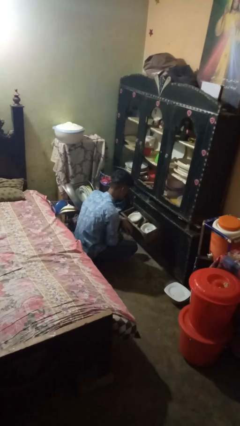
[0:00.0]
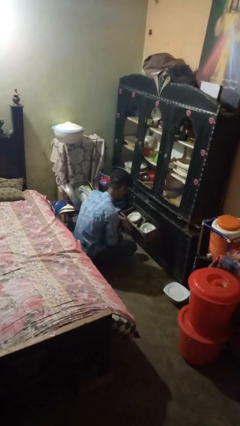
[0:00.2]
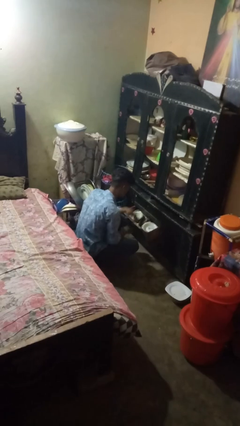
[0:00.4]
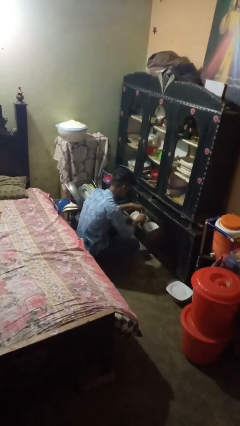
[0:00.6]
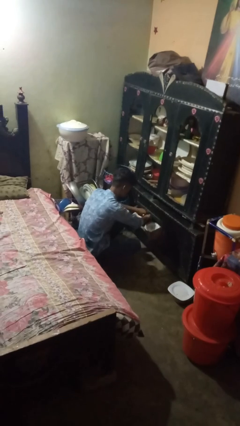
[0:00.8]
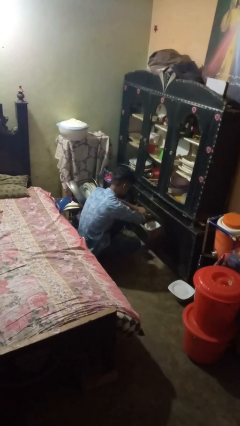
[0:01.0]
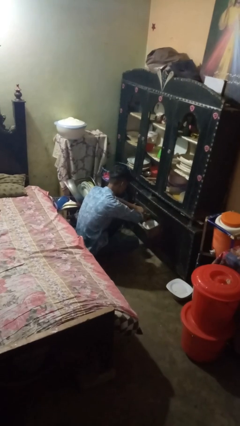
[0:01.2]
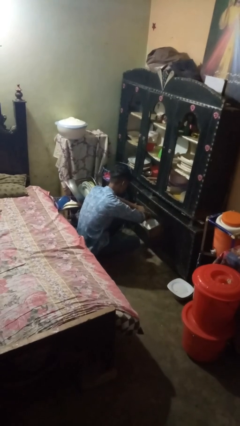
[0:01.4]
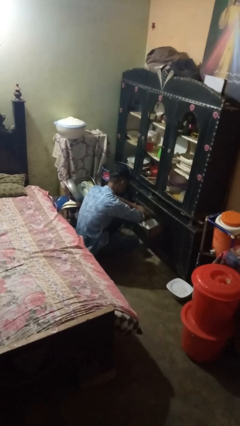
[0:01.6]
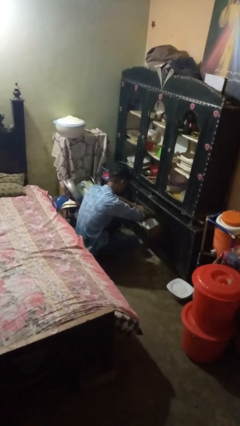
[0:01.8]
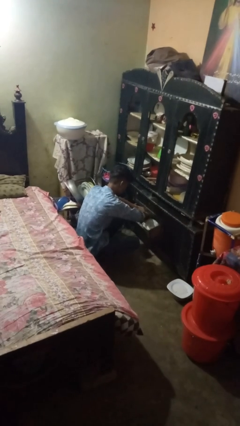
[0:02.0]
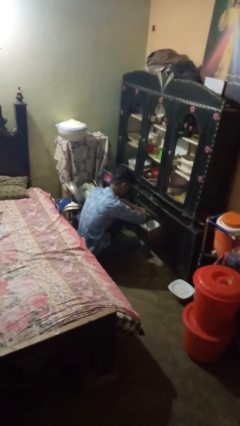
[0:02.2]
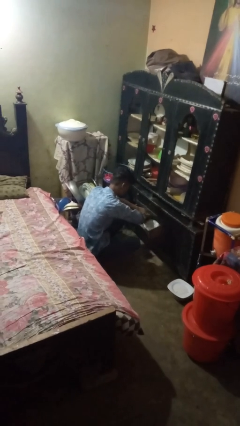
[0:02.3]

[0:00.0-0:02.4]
person searches in kitchen drawer

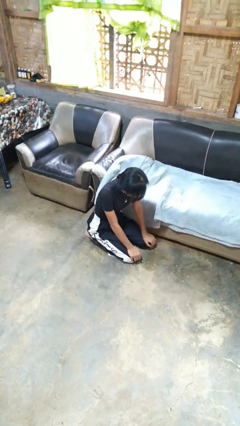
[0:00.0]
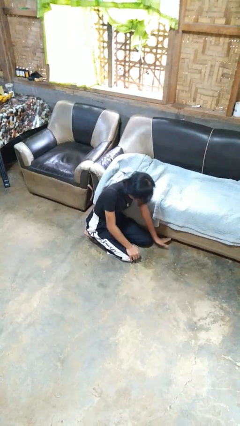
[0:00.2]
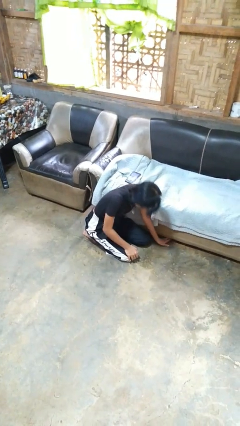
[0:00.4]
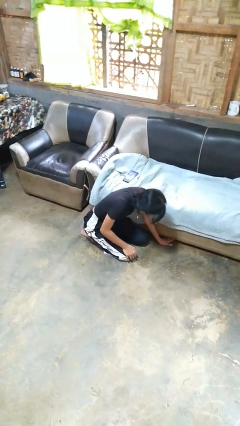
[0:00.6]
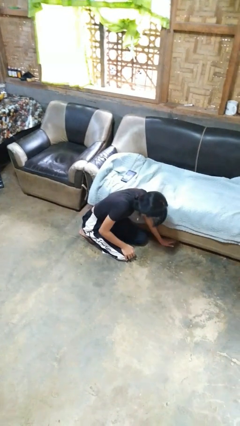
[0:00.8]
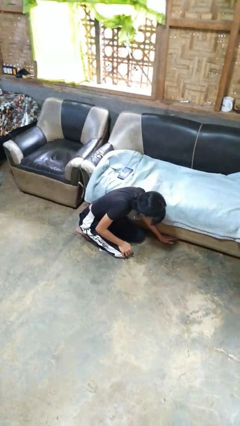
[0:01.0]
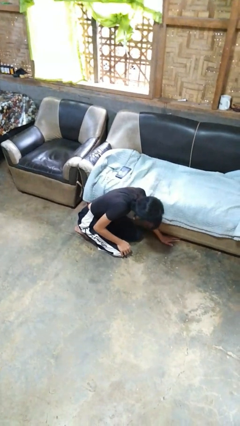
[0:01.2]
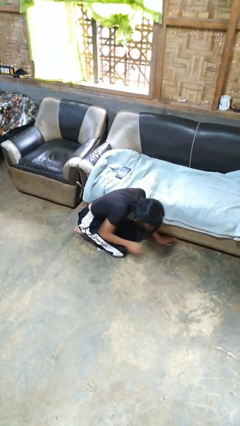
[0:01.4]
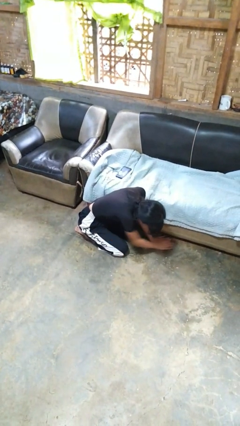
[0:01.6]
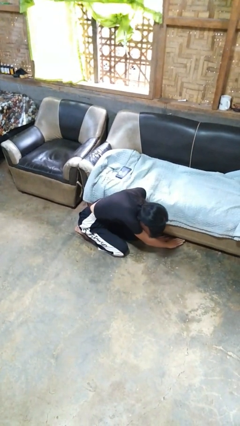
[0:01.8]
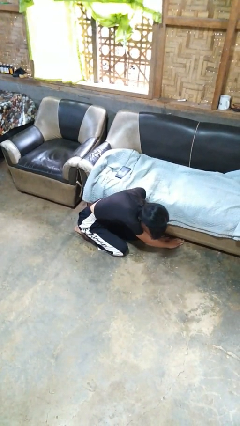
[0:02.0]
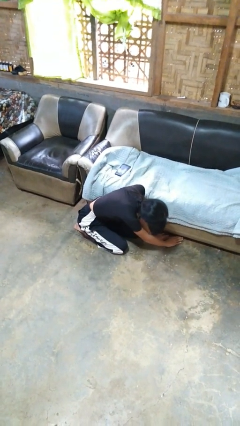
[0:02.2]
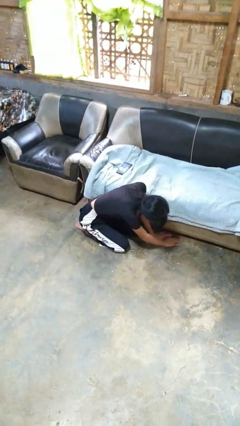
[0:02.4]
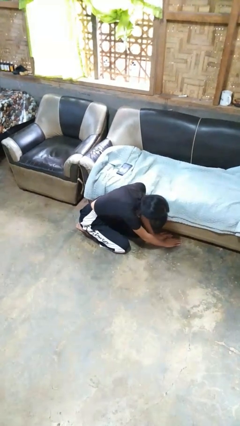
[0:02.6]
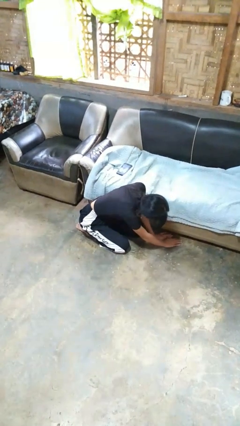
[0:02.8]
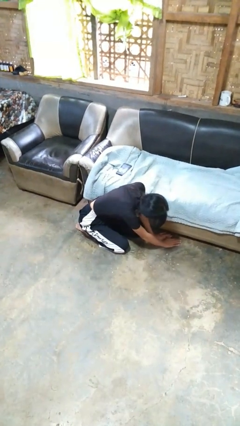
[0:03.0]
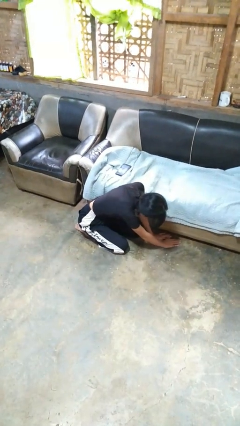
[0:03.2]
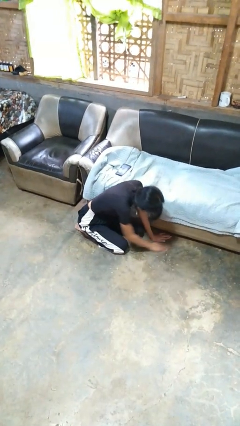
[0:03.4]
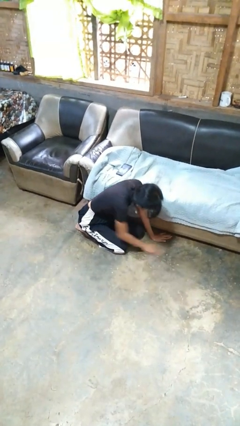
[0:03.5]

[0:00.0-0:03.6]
person searches under couch

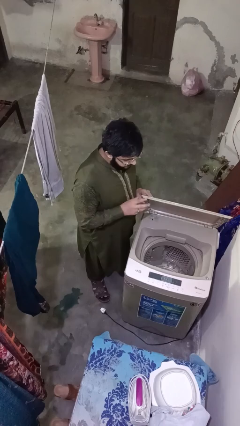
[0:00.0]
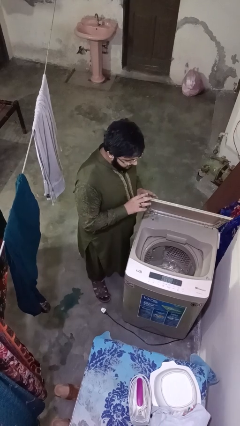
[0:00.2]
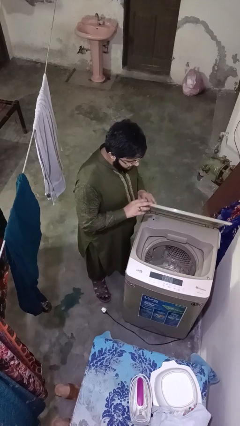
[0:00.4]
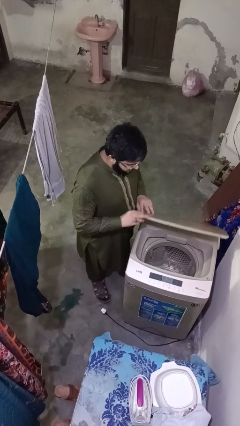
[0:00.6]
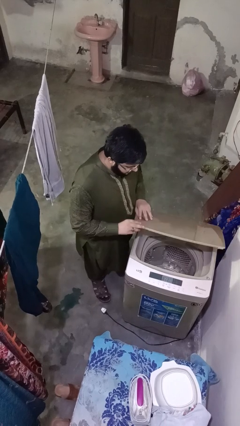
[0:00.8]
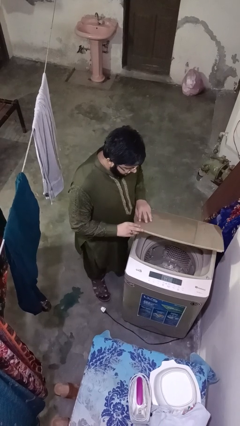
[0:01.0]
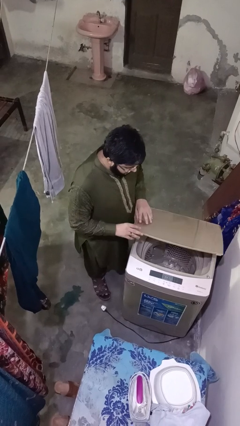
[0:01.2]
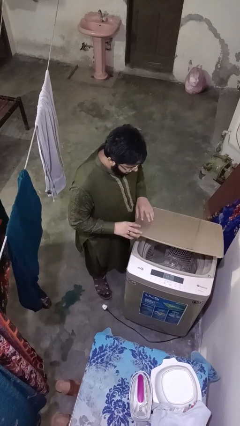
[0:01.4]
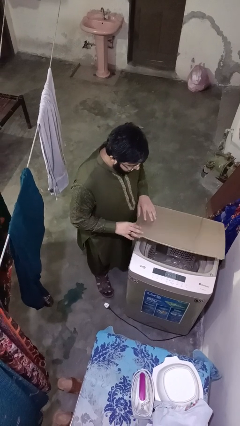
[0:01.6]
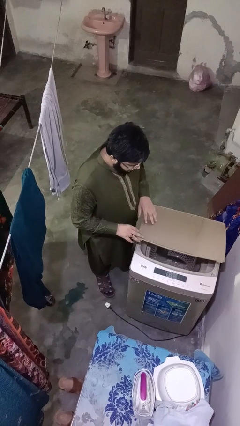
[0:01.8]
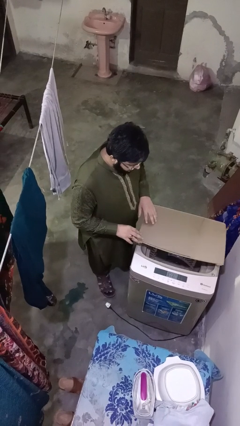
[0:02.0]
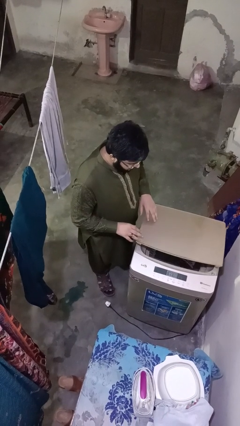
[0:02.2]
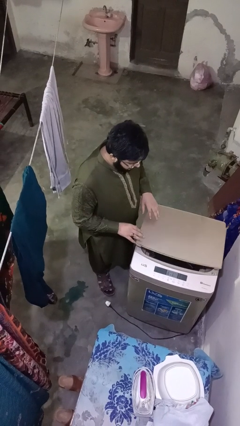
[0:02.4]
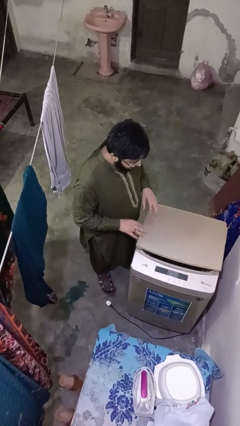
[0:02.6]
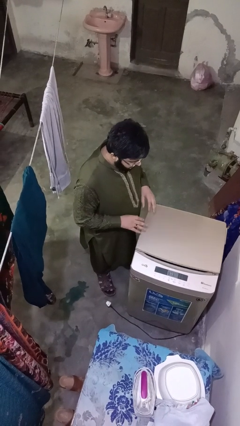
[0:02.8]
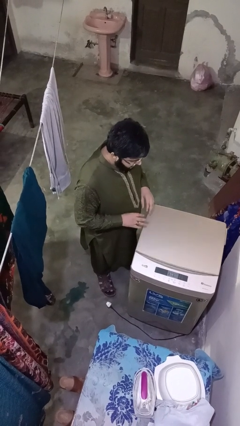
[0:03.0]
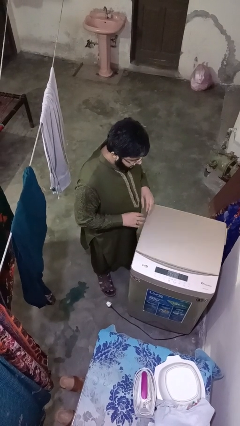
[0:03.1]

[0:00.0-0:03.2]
person closes clothes washer

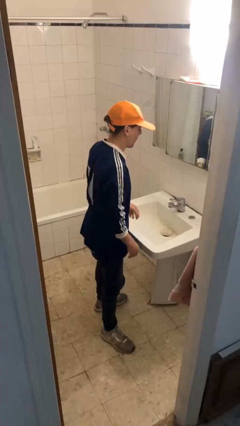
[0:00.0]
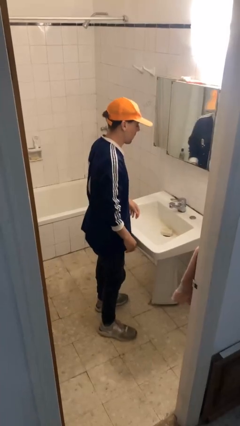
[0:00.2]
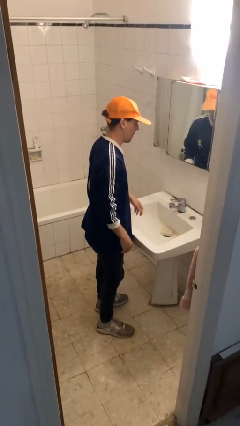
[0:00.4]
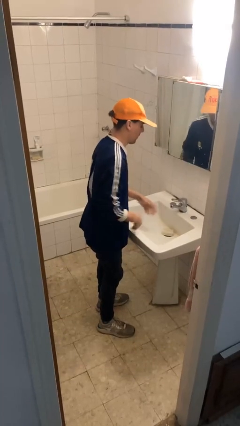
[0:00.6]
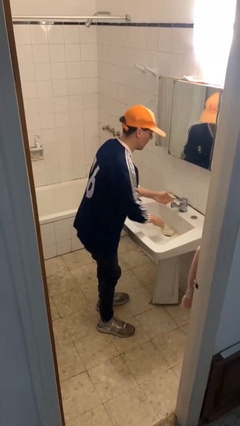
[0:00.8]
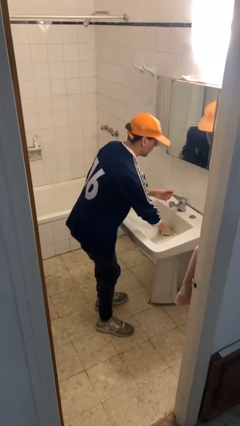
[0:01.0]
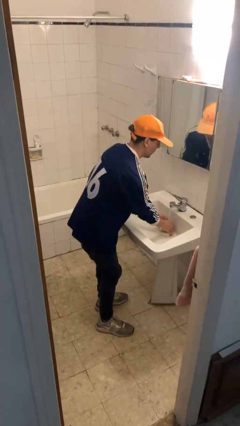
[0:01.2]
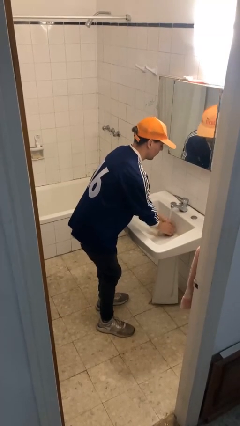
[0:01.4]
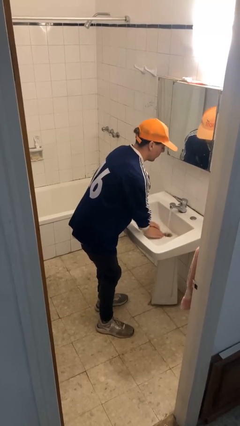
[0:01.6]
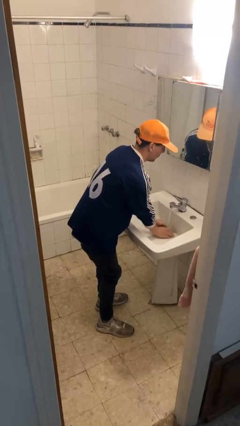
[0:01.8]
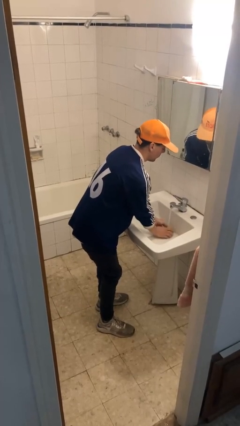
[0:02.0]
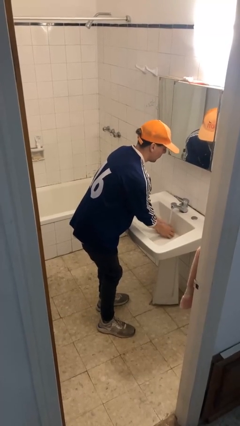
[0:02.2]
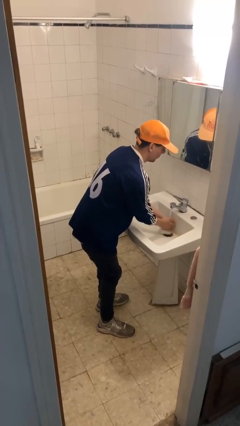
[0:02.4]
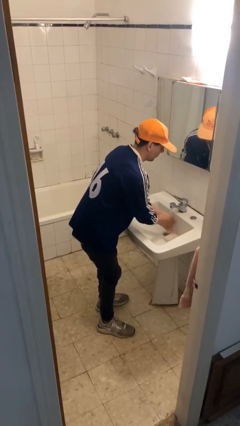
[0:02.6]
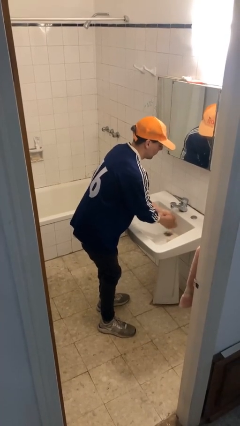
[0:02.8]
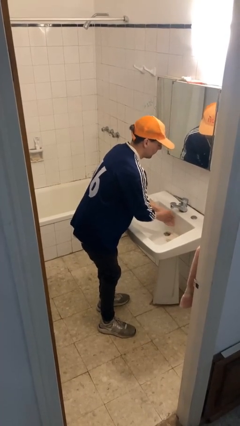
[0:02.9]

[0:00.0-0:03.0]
person washes hands

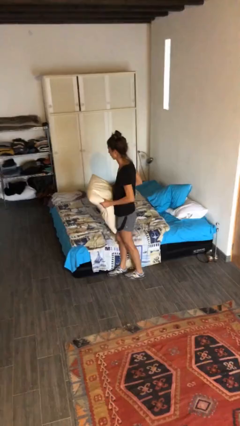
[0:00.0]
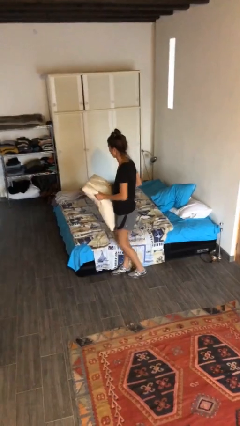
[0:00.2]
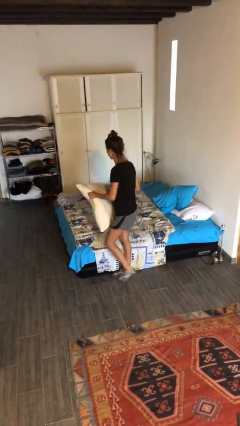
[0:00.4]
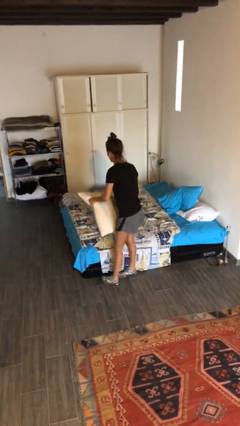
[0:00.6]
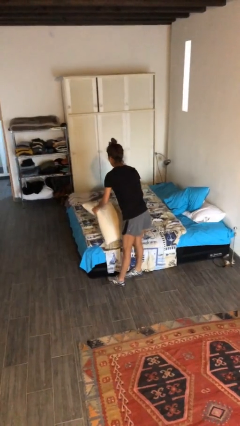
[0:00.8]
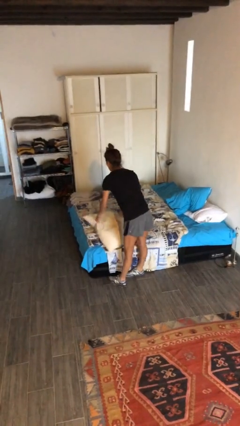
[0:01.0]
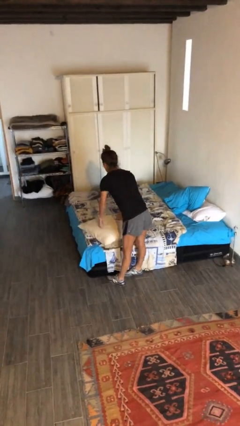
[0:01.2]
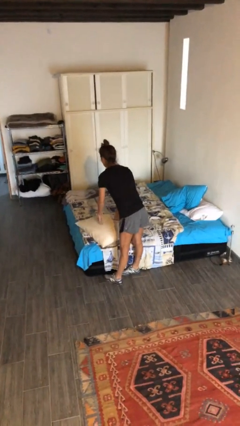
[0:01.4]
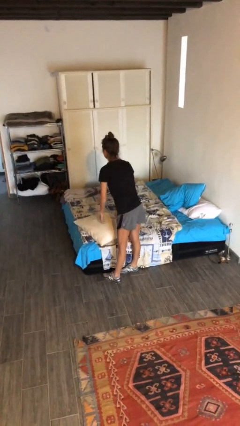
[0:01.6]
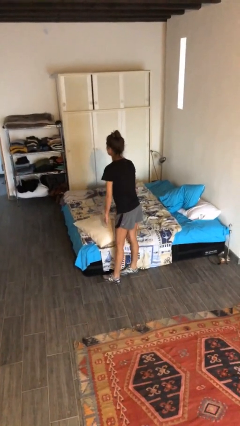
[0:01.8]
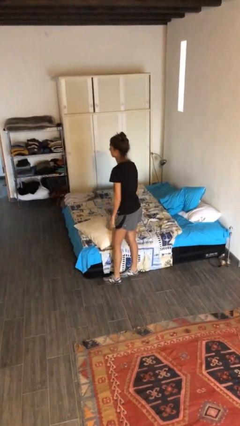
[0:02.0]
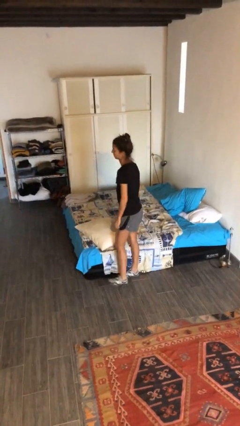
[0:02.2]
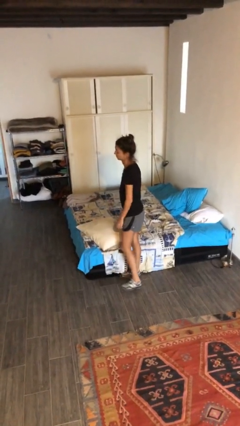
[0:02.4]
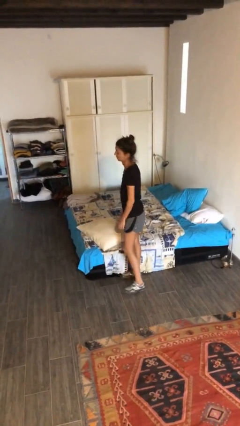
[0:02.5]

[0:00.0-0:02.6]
person puts down object on bed

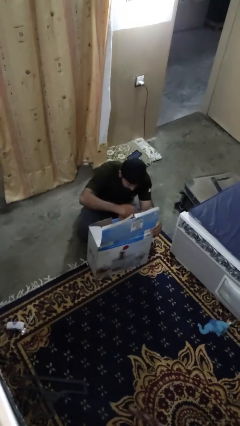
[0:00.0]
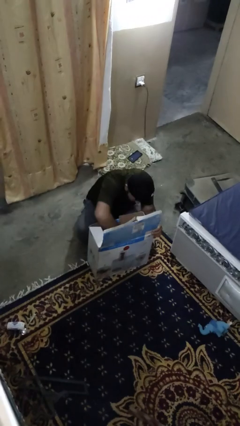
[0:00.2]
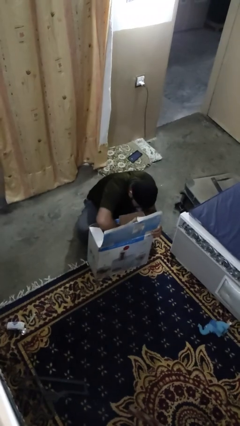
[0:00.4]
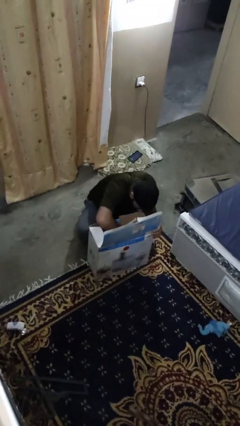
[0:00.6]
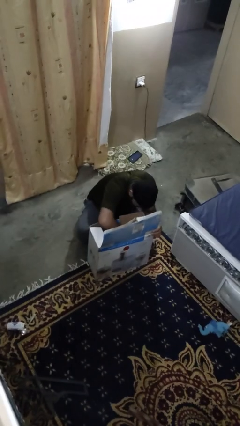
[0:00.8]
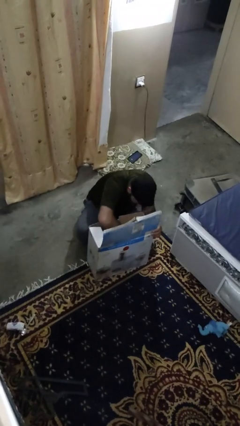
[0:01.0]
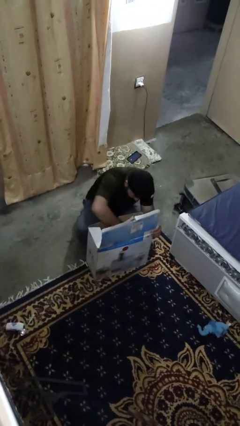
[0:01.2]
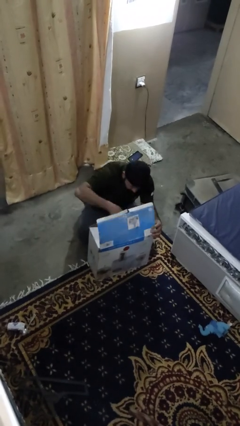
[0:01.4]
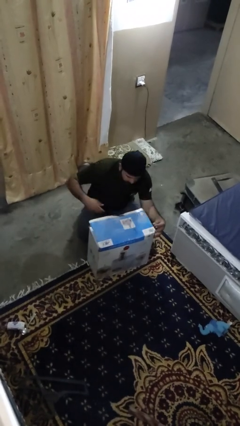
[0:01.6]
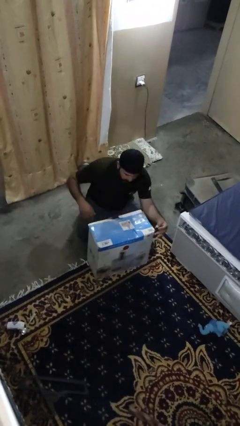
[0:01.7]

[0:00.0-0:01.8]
person searches in box

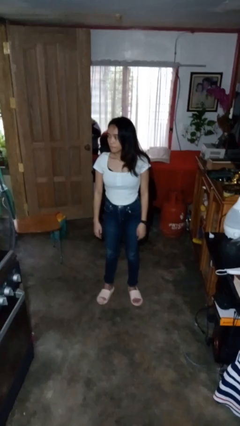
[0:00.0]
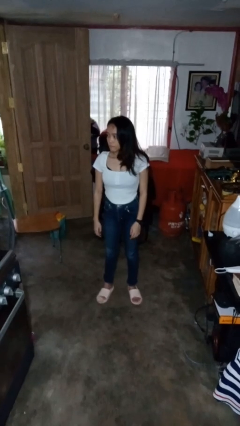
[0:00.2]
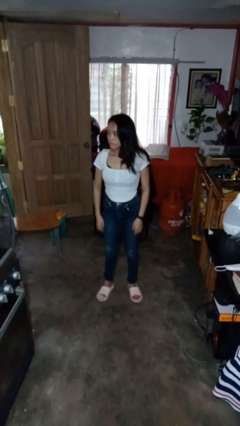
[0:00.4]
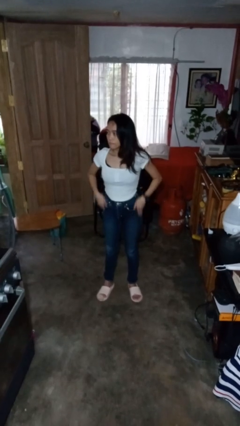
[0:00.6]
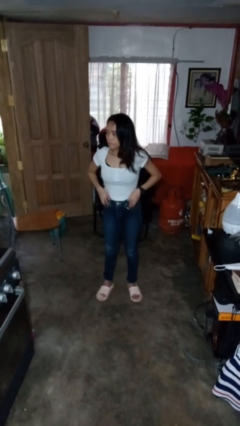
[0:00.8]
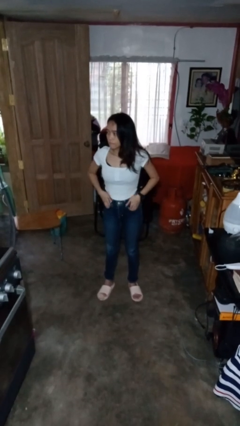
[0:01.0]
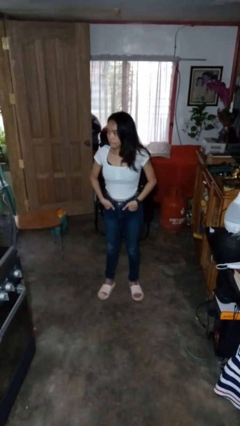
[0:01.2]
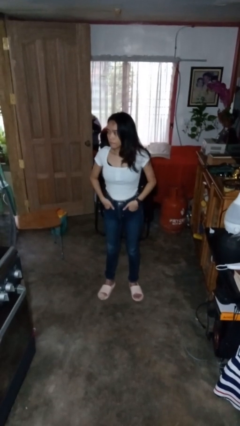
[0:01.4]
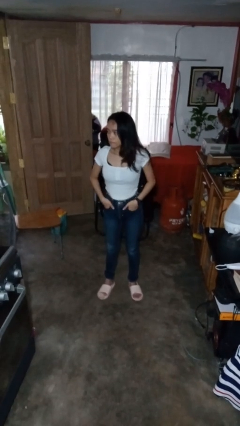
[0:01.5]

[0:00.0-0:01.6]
person puts hands in back pockets
